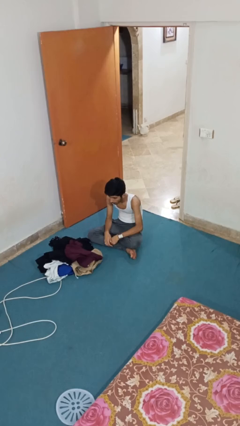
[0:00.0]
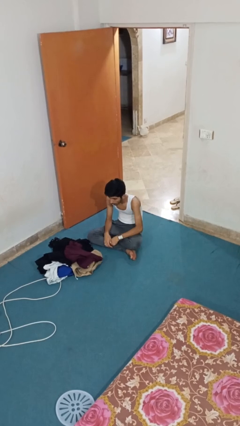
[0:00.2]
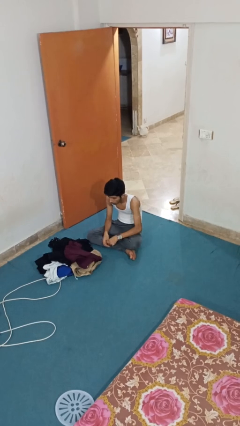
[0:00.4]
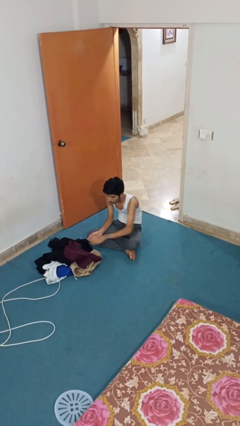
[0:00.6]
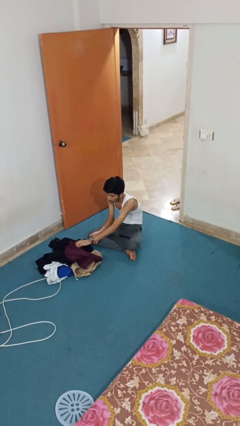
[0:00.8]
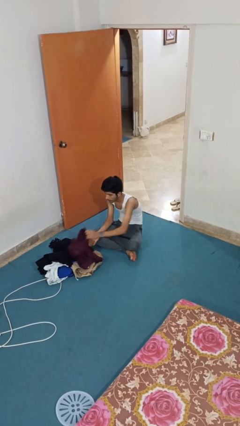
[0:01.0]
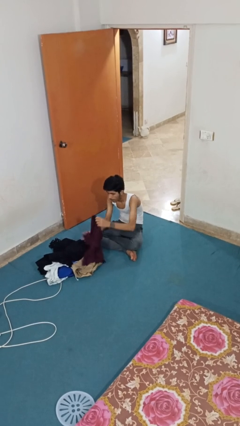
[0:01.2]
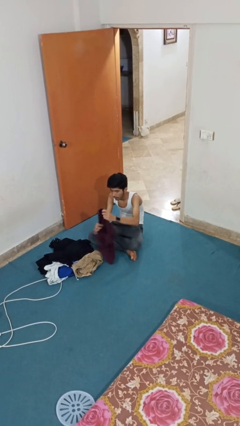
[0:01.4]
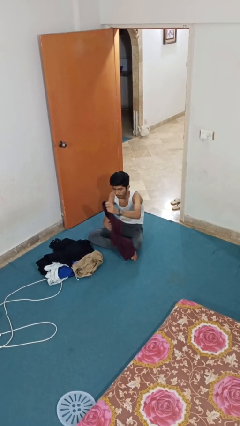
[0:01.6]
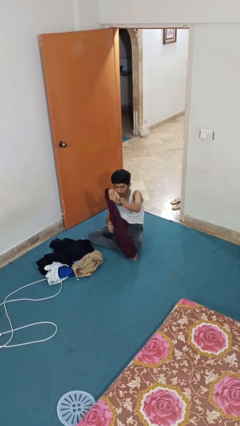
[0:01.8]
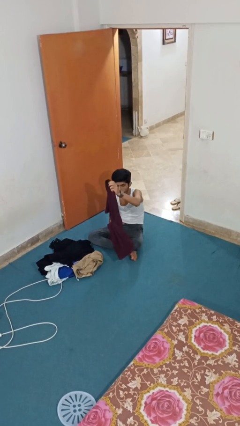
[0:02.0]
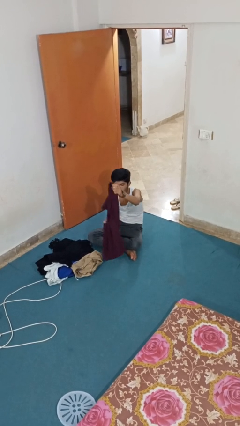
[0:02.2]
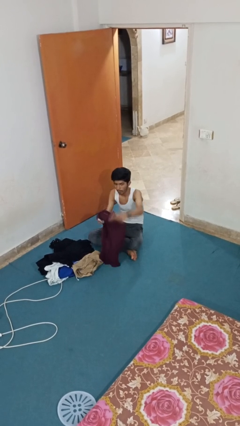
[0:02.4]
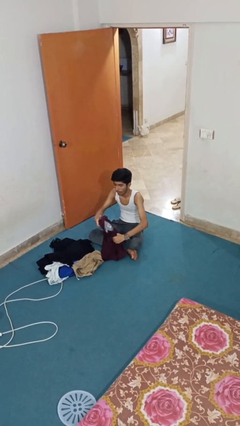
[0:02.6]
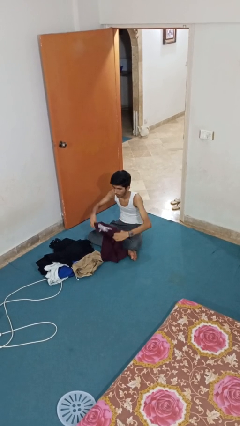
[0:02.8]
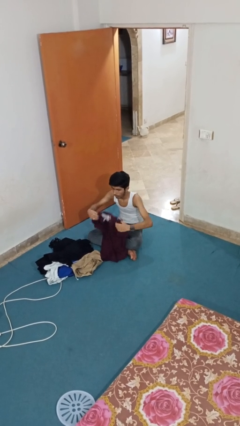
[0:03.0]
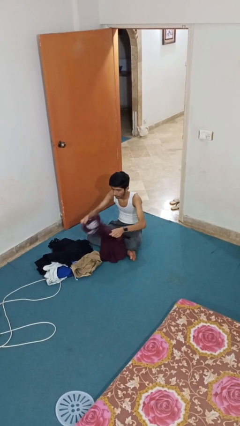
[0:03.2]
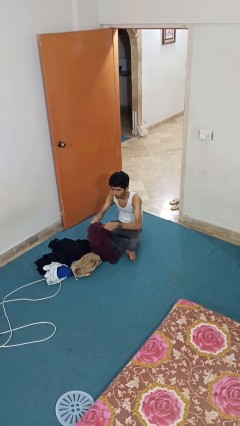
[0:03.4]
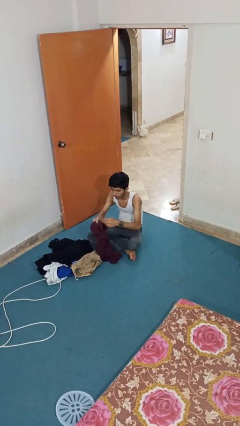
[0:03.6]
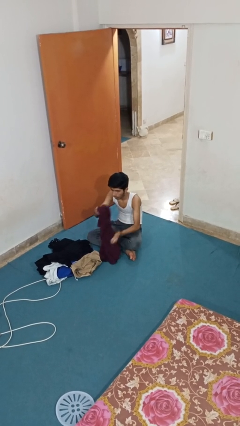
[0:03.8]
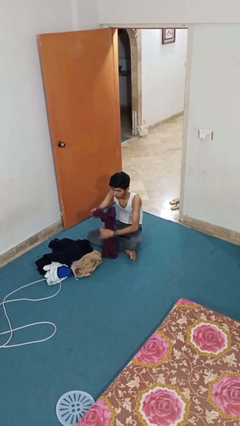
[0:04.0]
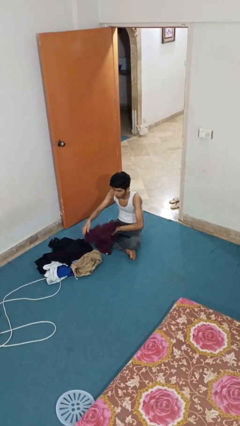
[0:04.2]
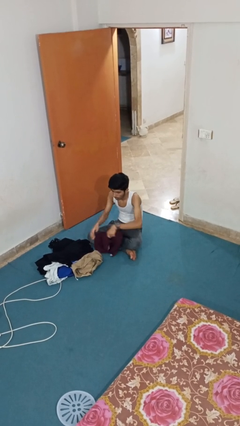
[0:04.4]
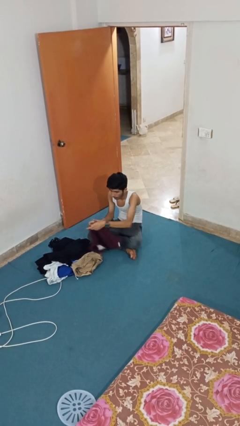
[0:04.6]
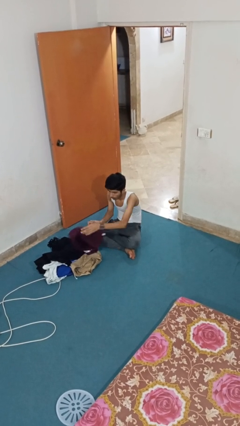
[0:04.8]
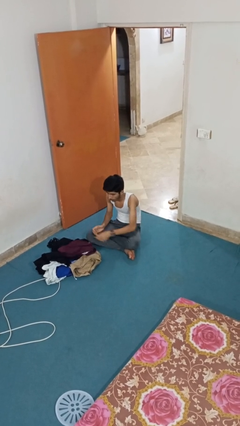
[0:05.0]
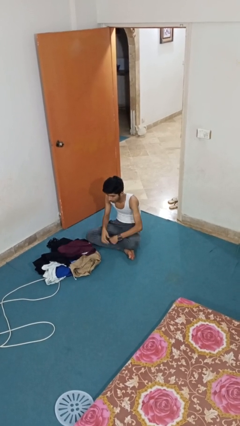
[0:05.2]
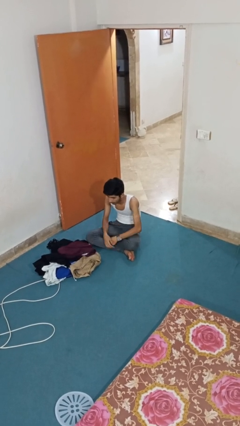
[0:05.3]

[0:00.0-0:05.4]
person folds shirt

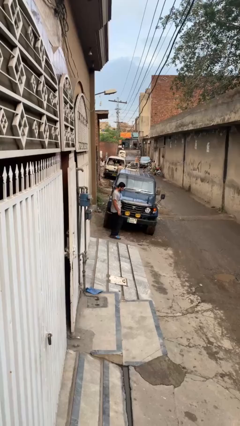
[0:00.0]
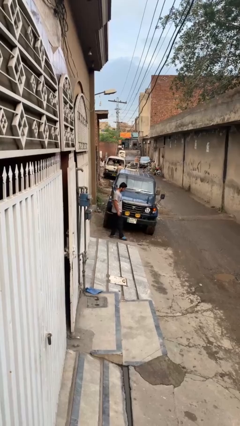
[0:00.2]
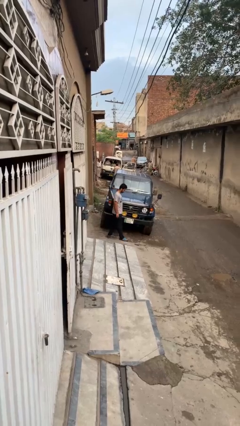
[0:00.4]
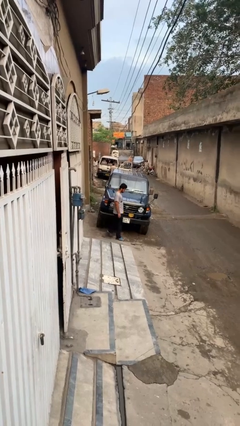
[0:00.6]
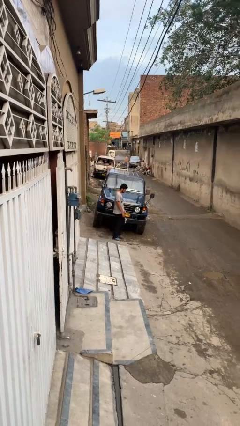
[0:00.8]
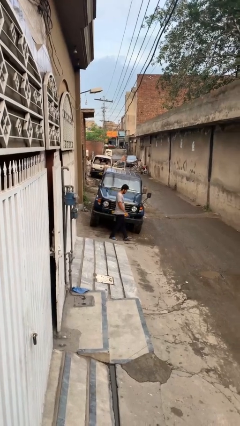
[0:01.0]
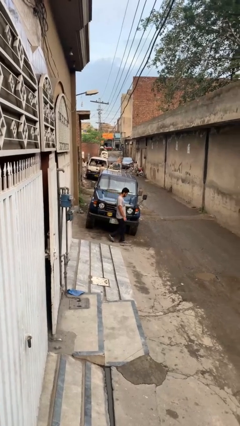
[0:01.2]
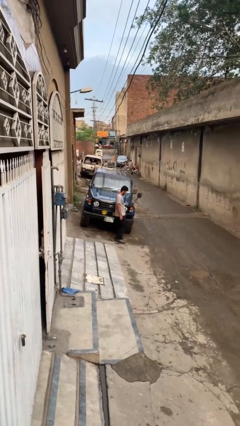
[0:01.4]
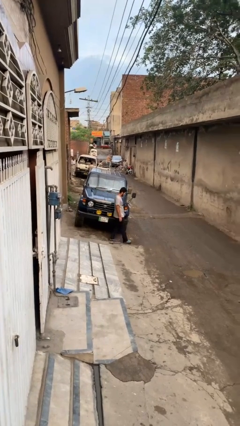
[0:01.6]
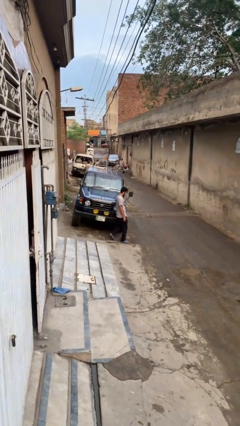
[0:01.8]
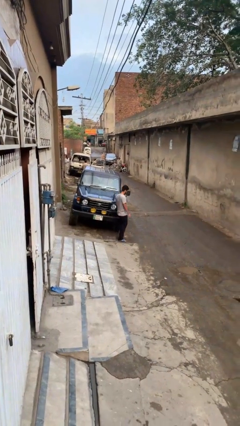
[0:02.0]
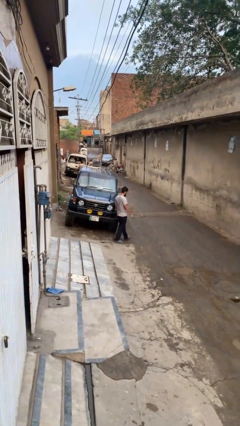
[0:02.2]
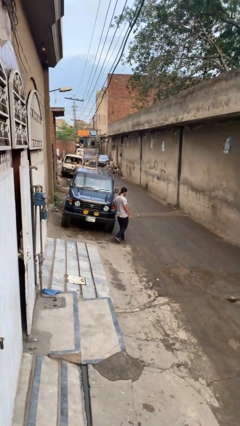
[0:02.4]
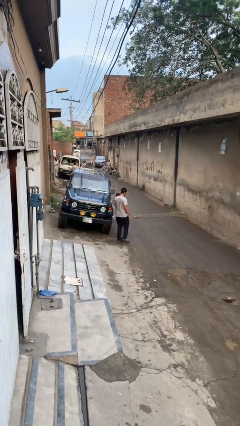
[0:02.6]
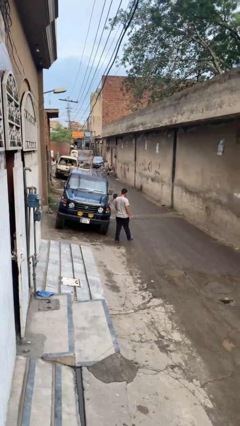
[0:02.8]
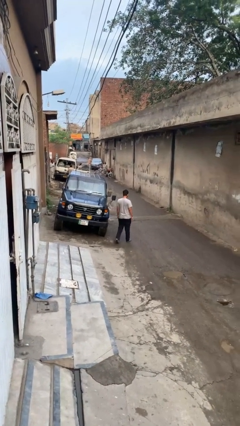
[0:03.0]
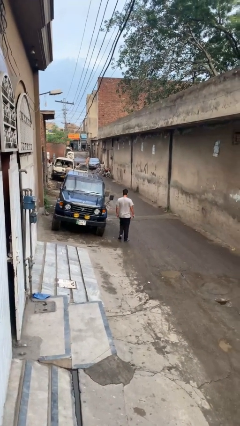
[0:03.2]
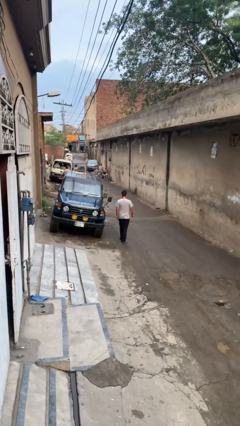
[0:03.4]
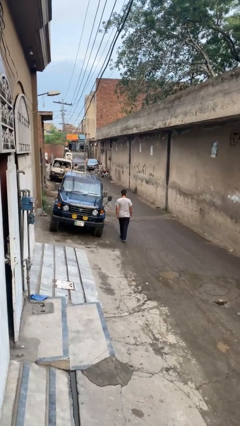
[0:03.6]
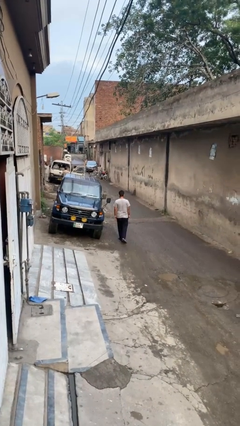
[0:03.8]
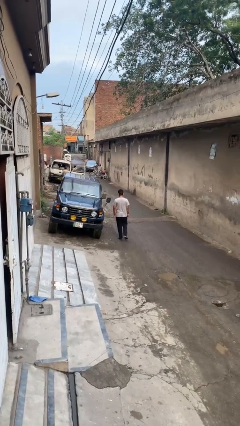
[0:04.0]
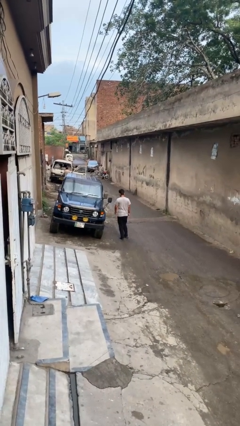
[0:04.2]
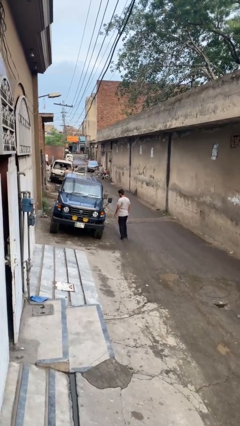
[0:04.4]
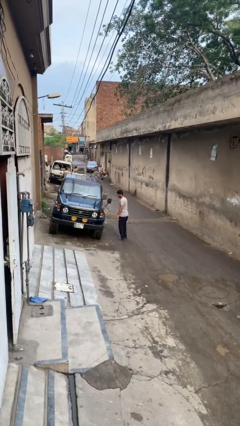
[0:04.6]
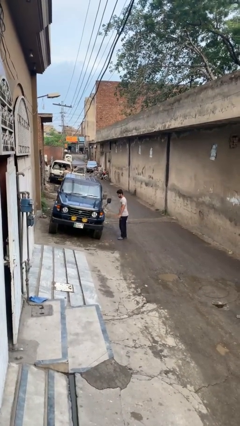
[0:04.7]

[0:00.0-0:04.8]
person walks around car

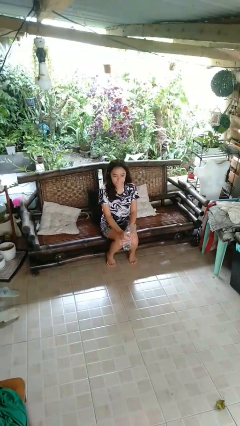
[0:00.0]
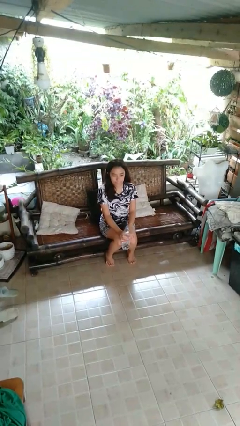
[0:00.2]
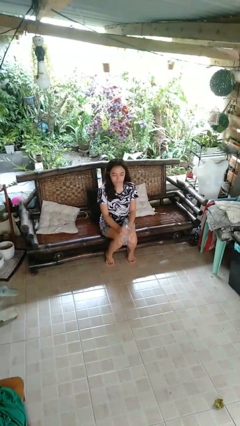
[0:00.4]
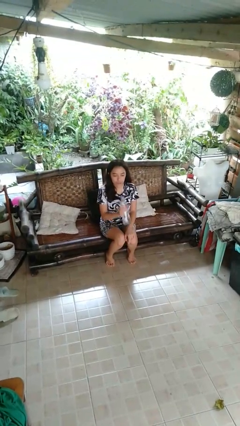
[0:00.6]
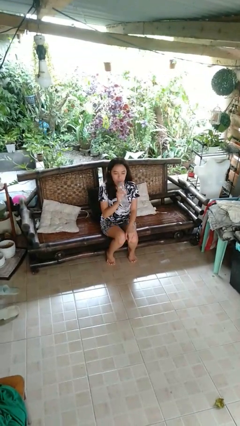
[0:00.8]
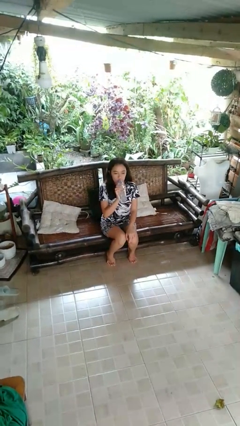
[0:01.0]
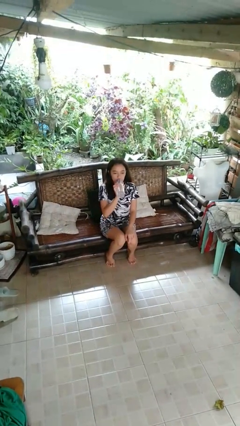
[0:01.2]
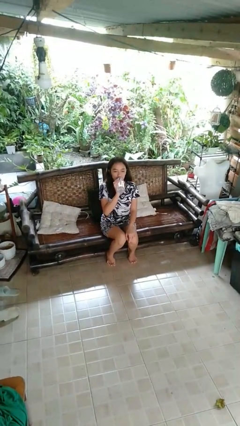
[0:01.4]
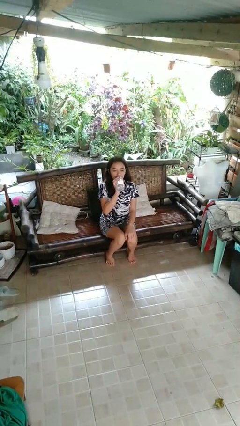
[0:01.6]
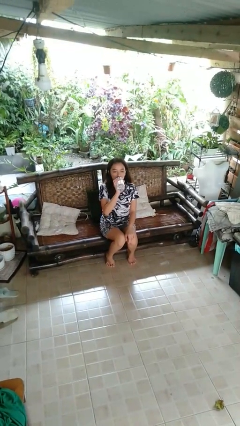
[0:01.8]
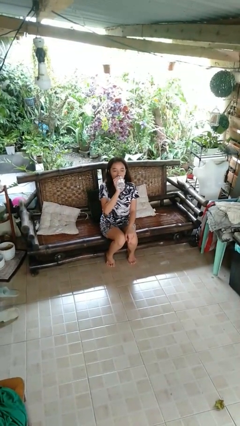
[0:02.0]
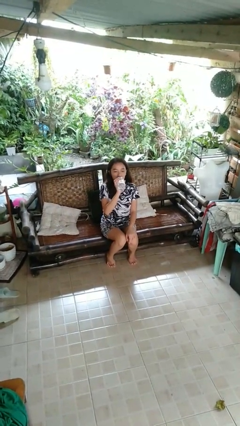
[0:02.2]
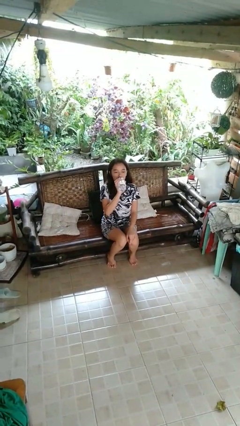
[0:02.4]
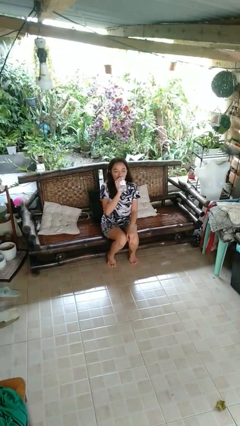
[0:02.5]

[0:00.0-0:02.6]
person drinks from bottle

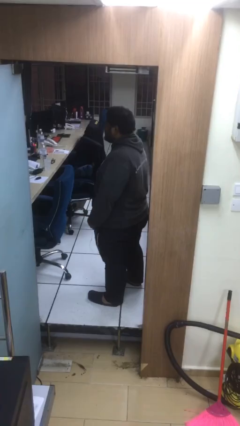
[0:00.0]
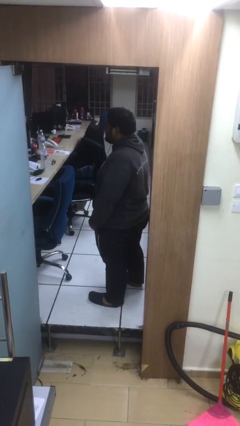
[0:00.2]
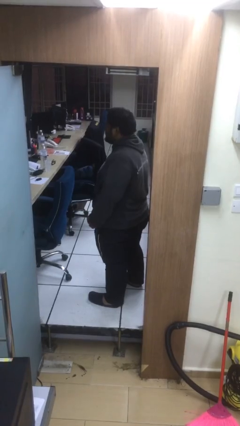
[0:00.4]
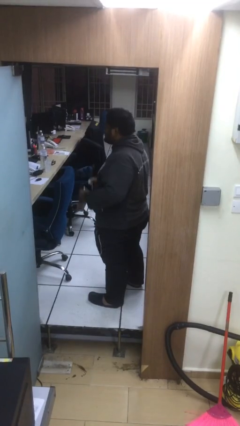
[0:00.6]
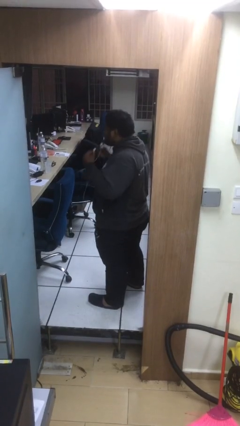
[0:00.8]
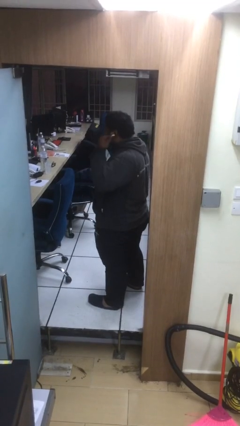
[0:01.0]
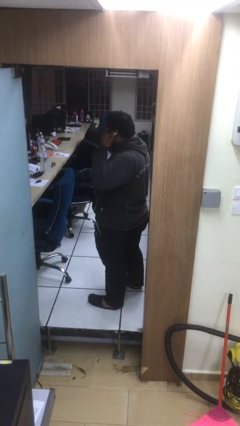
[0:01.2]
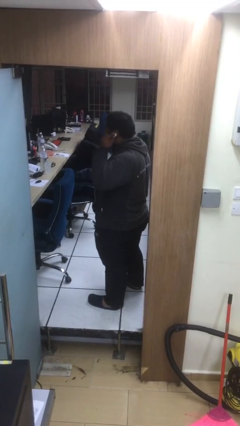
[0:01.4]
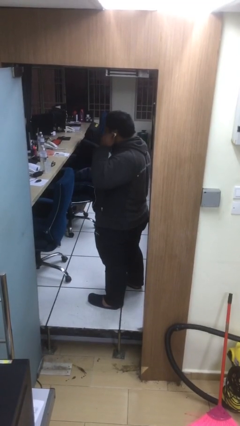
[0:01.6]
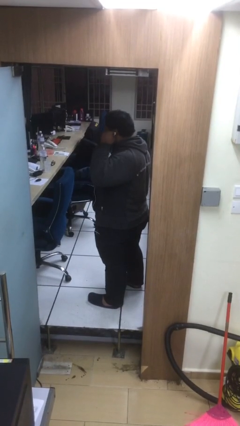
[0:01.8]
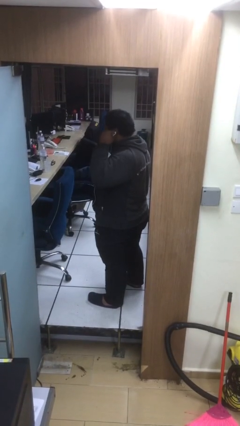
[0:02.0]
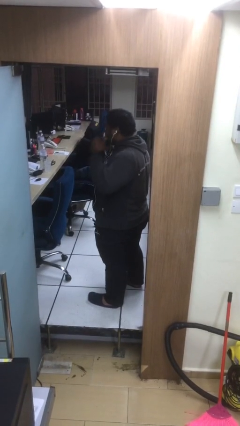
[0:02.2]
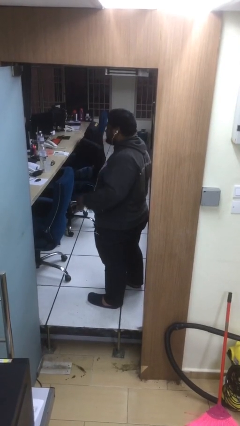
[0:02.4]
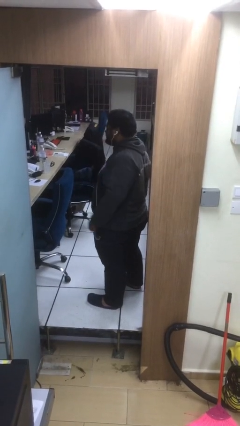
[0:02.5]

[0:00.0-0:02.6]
person puts on headphones

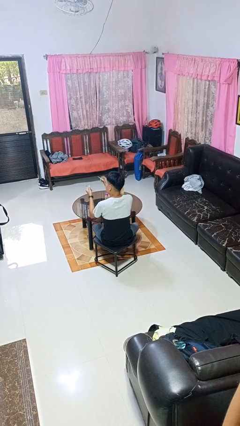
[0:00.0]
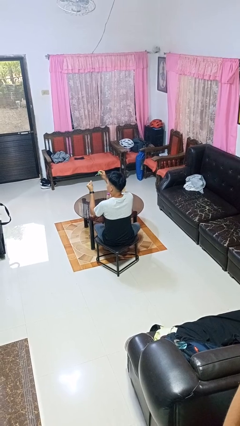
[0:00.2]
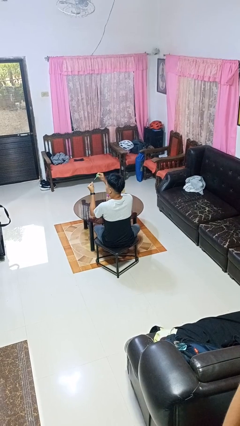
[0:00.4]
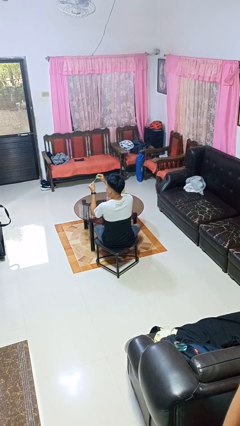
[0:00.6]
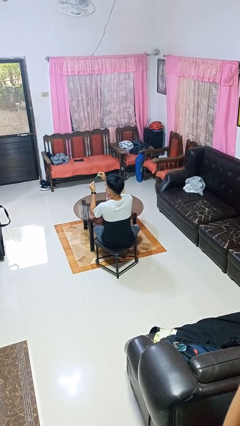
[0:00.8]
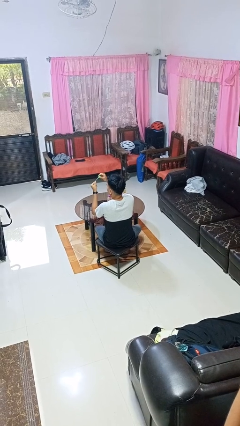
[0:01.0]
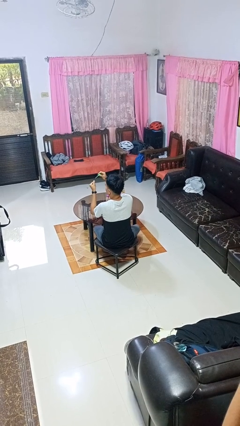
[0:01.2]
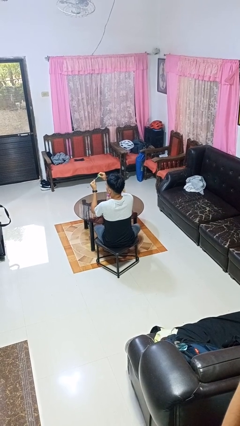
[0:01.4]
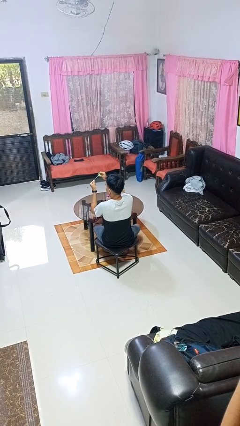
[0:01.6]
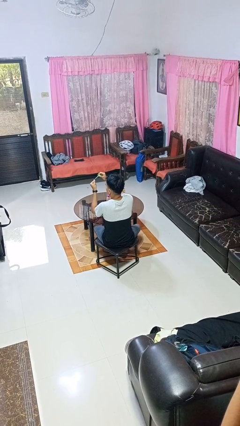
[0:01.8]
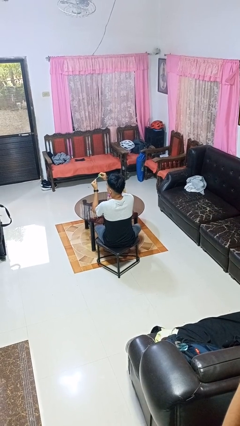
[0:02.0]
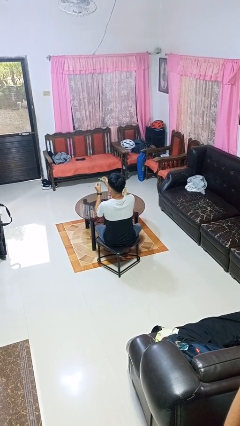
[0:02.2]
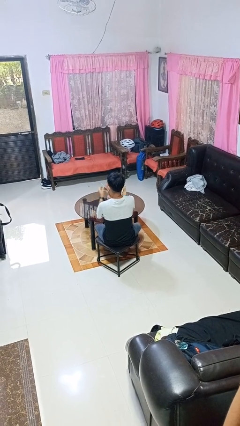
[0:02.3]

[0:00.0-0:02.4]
person paints fingernails
